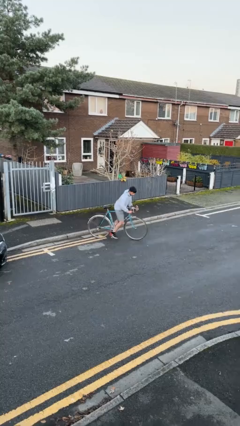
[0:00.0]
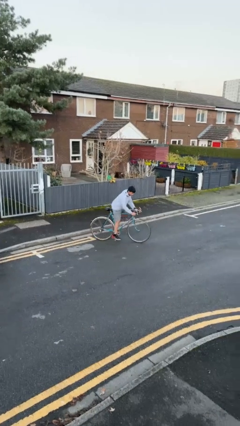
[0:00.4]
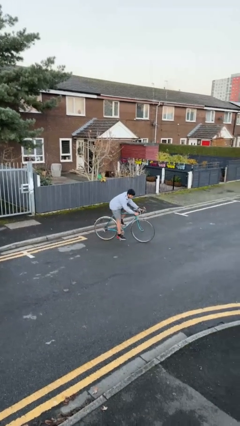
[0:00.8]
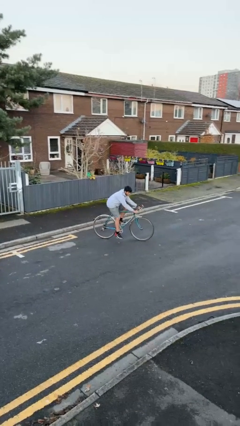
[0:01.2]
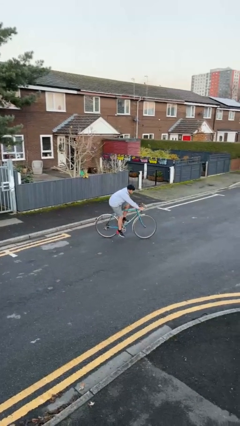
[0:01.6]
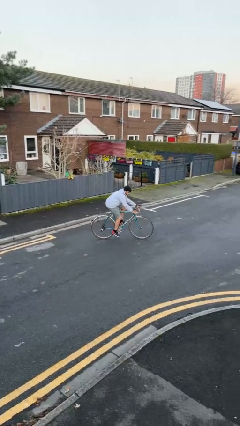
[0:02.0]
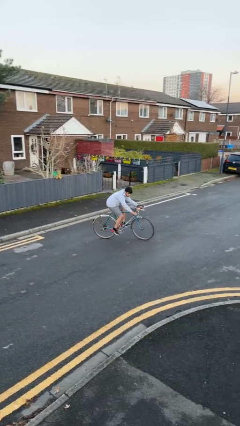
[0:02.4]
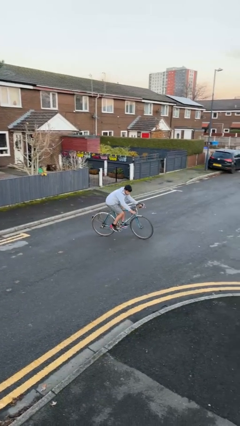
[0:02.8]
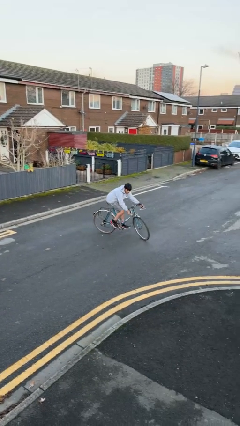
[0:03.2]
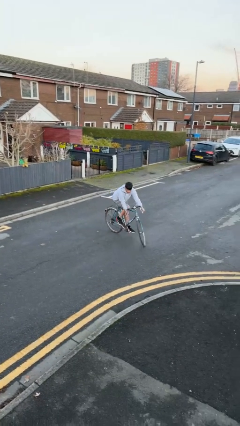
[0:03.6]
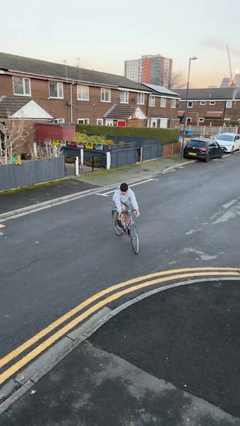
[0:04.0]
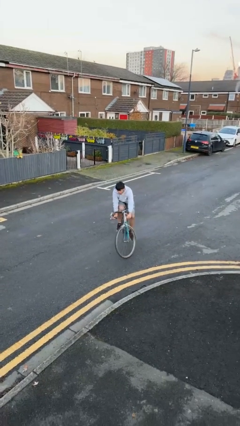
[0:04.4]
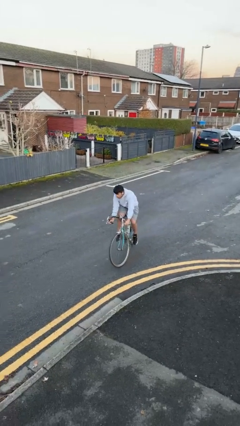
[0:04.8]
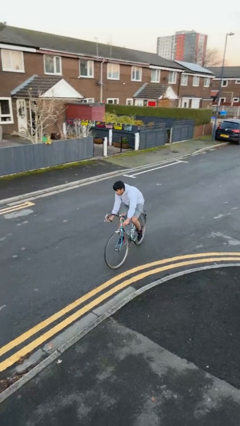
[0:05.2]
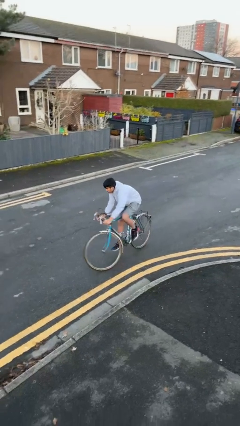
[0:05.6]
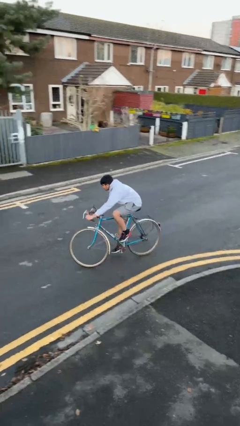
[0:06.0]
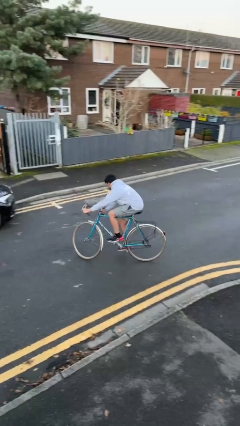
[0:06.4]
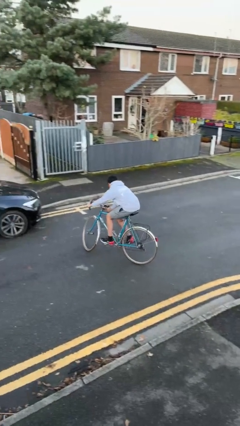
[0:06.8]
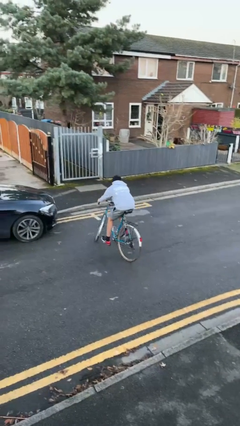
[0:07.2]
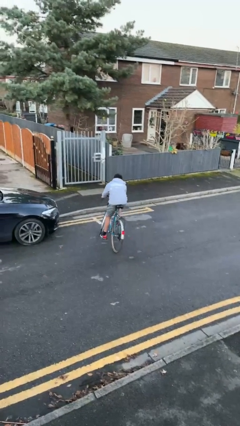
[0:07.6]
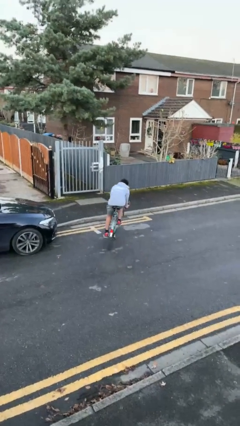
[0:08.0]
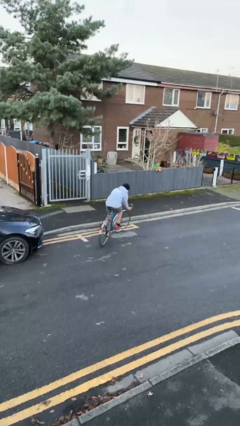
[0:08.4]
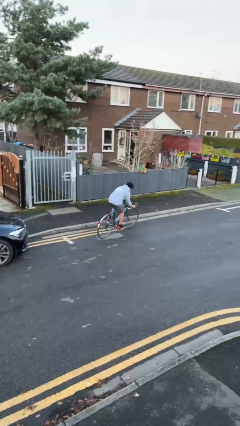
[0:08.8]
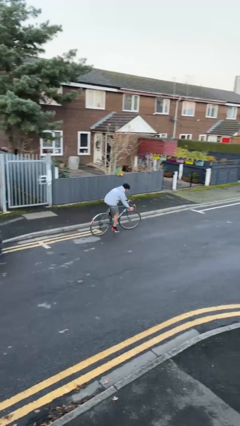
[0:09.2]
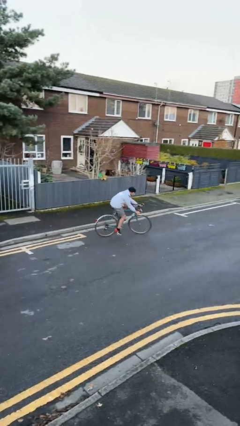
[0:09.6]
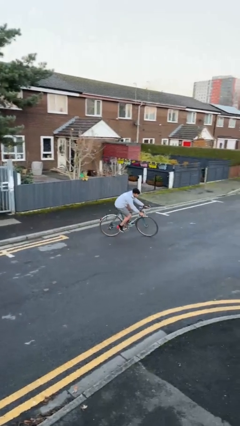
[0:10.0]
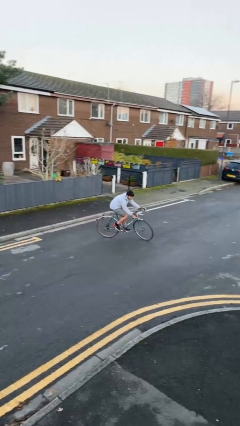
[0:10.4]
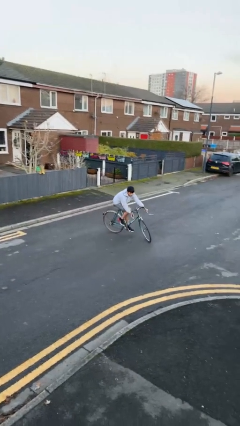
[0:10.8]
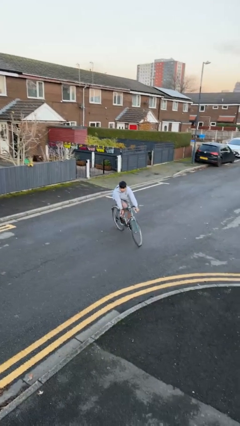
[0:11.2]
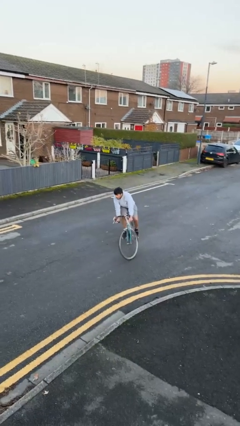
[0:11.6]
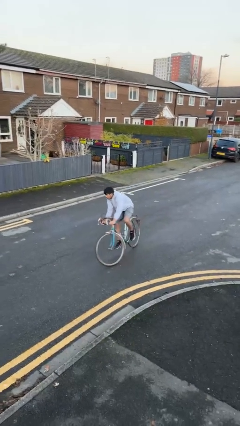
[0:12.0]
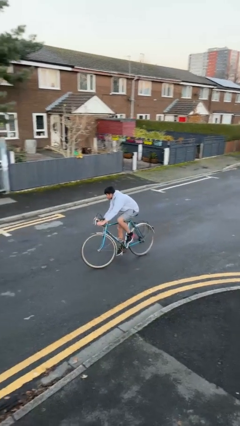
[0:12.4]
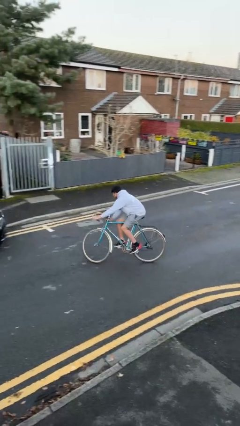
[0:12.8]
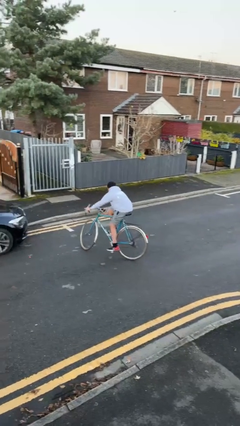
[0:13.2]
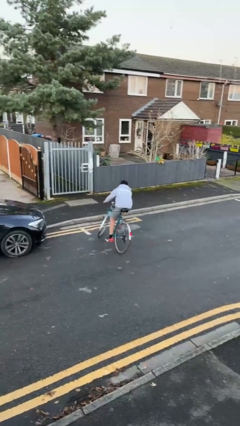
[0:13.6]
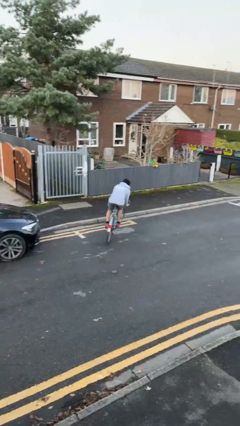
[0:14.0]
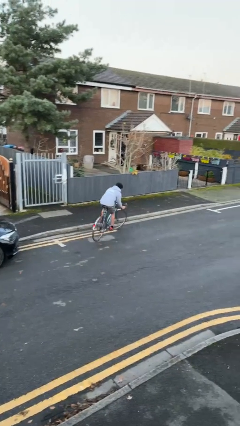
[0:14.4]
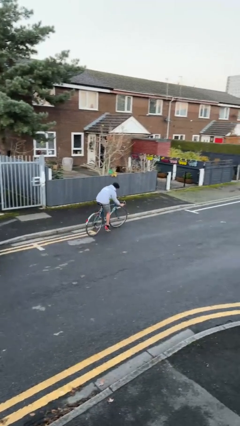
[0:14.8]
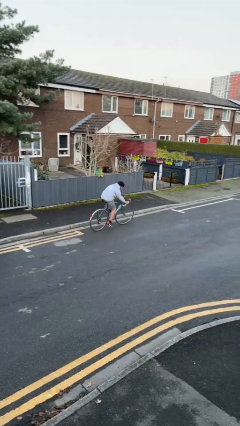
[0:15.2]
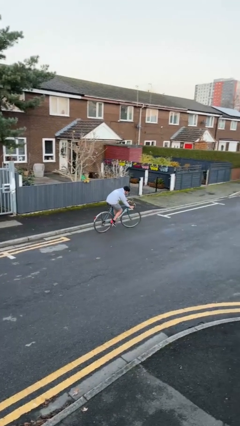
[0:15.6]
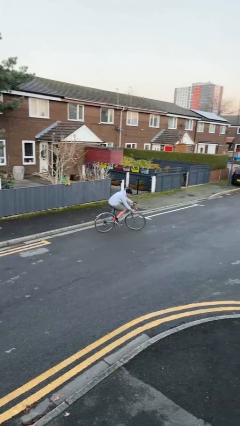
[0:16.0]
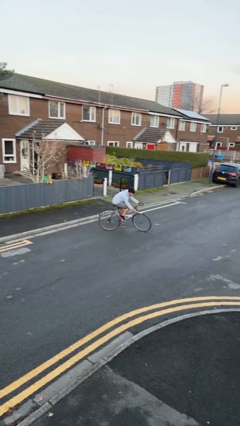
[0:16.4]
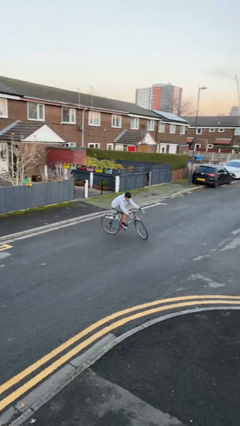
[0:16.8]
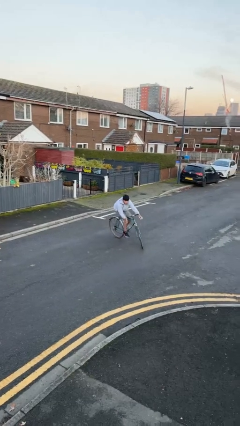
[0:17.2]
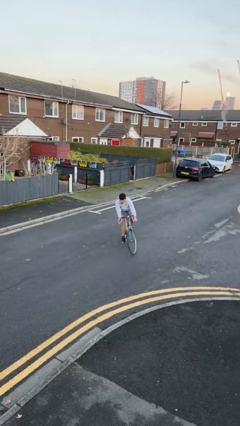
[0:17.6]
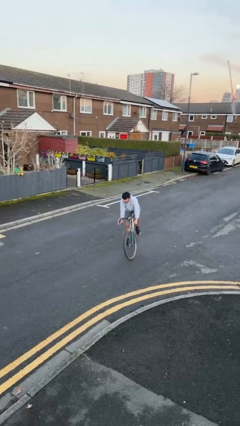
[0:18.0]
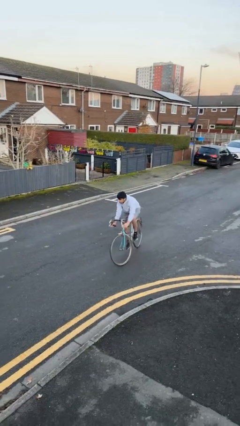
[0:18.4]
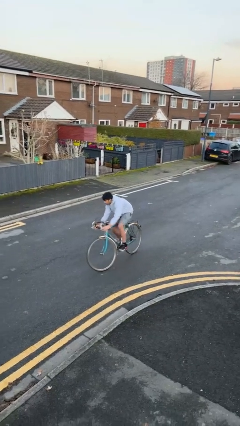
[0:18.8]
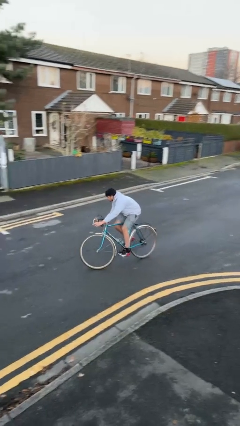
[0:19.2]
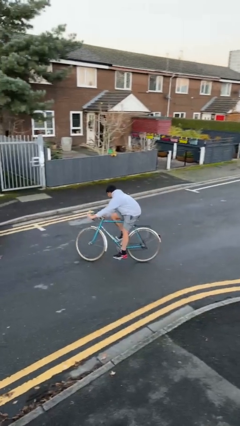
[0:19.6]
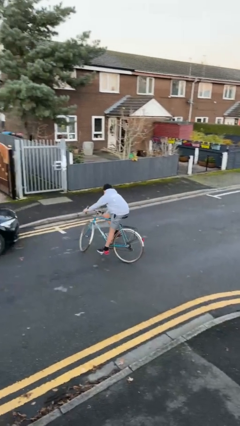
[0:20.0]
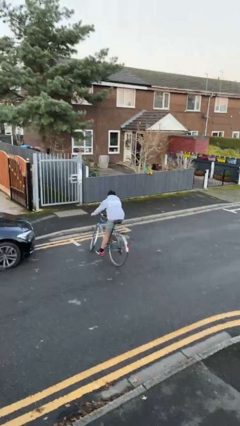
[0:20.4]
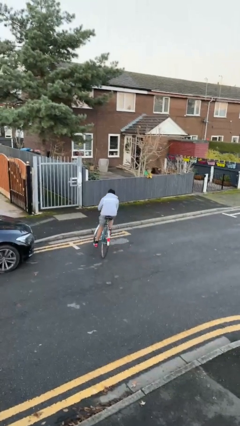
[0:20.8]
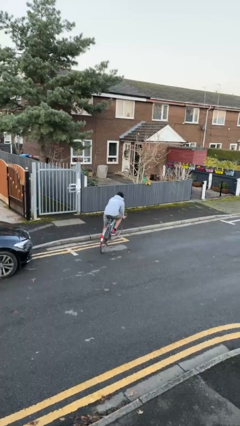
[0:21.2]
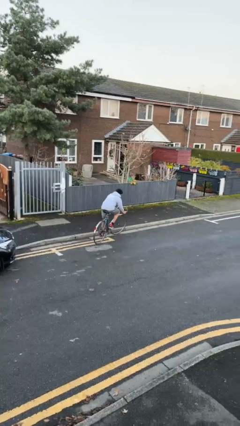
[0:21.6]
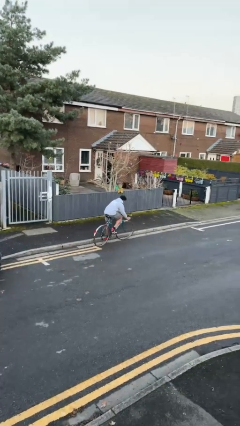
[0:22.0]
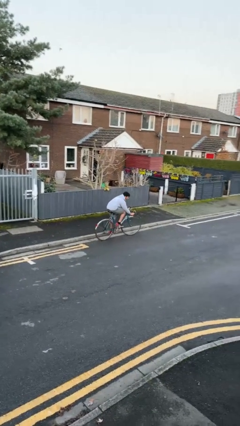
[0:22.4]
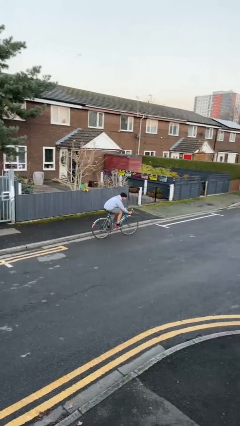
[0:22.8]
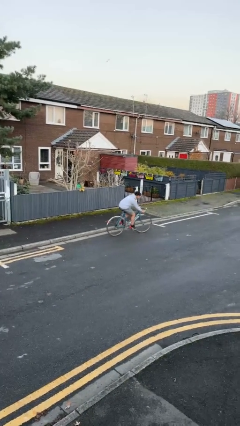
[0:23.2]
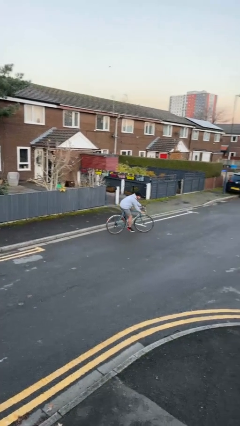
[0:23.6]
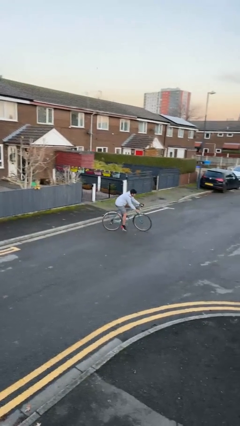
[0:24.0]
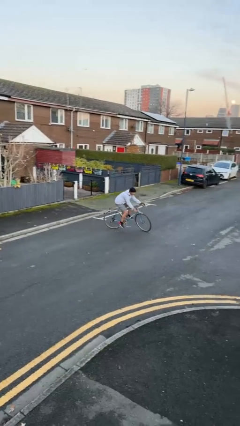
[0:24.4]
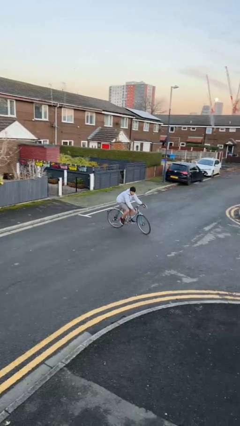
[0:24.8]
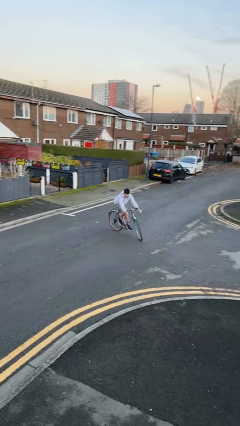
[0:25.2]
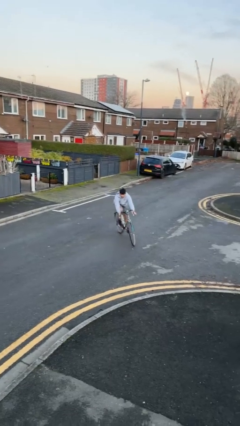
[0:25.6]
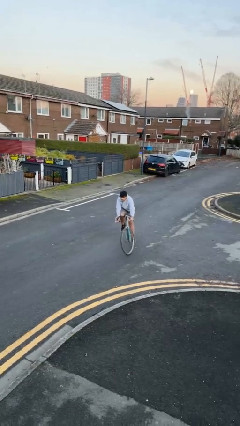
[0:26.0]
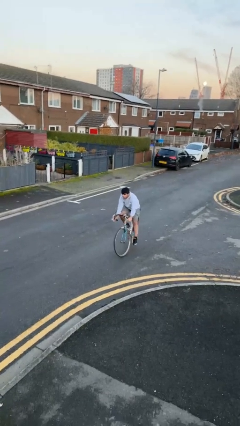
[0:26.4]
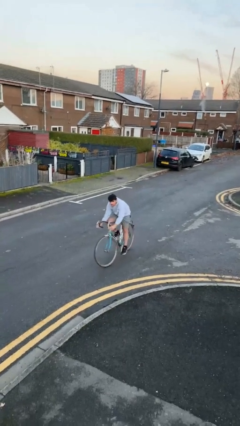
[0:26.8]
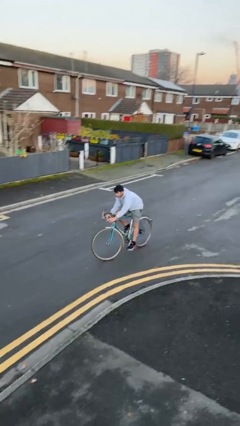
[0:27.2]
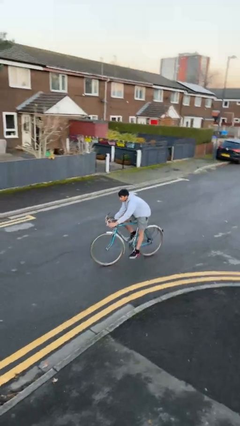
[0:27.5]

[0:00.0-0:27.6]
person rides bicycle

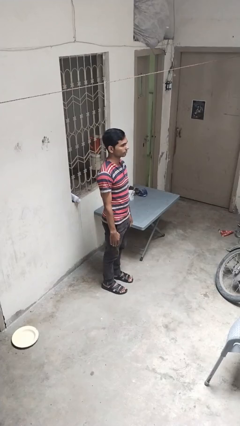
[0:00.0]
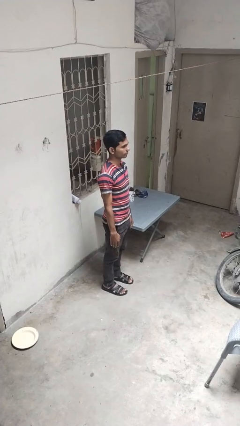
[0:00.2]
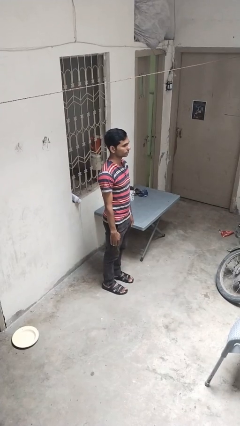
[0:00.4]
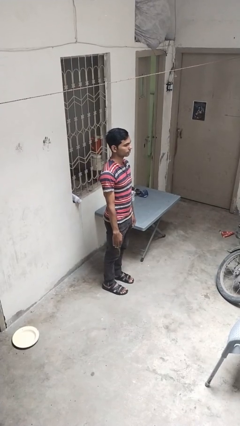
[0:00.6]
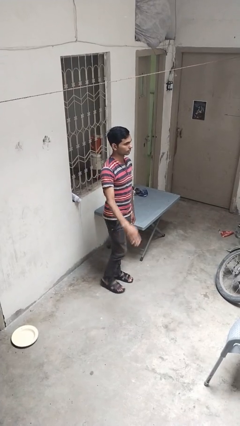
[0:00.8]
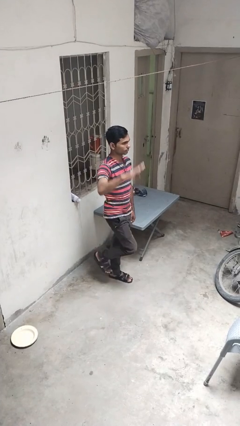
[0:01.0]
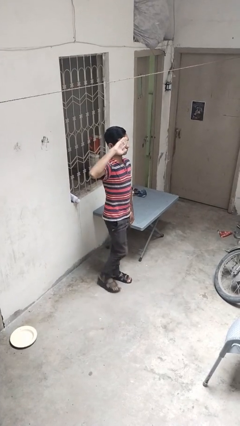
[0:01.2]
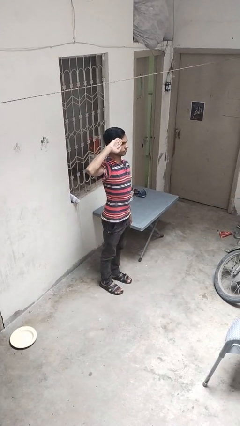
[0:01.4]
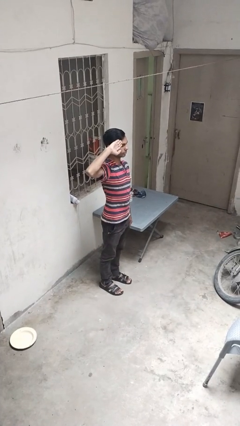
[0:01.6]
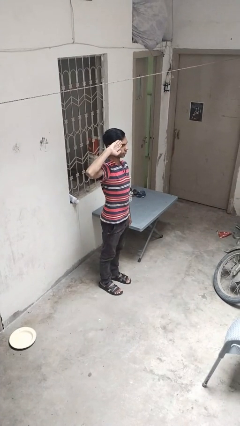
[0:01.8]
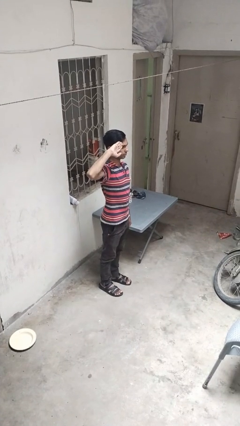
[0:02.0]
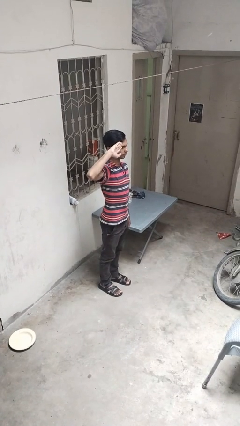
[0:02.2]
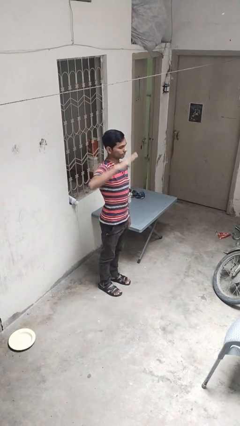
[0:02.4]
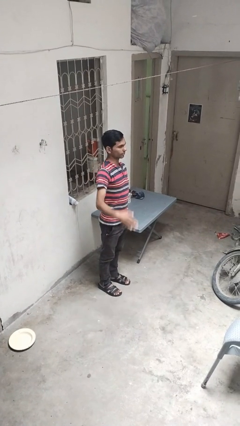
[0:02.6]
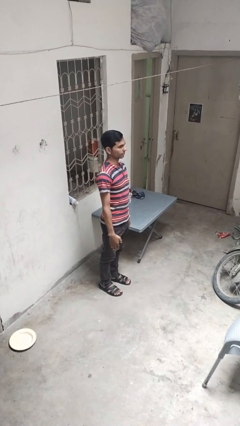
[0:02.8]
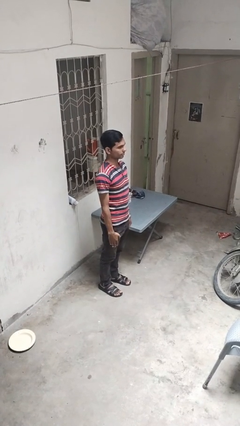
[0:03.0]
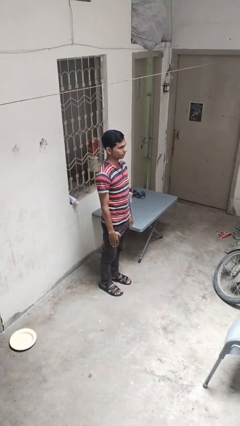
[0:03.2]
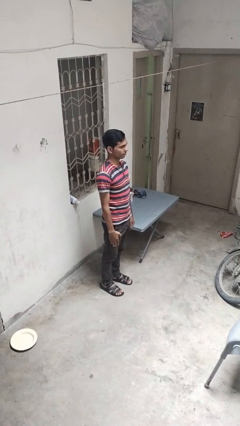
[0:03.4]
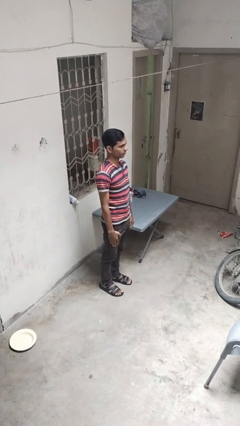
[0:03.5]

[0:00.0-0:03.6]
person salutes

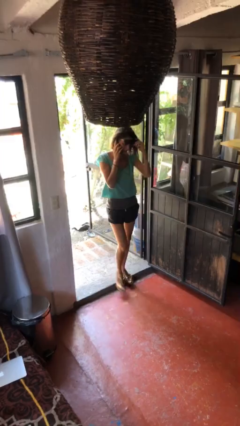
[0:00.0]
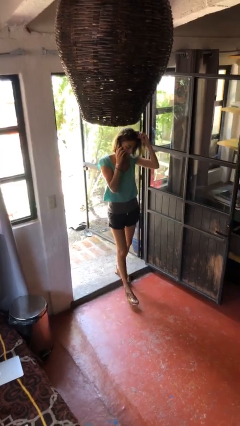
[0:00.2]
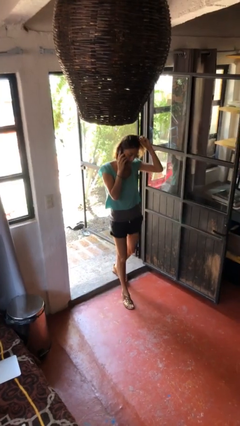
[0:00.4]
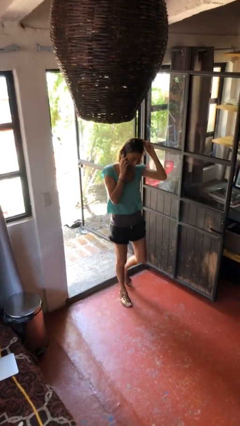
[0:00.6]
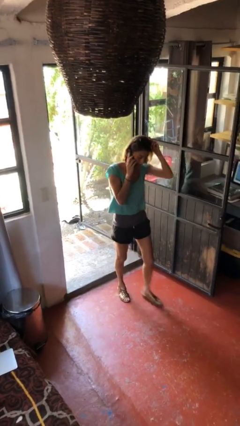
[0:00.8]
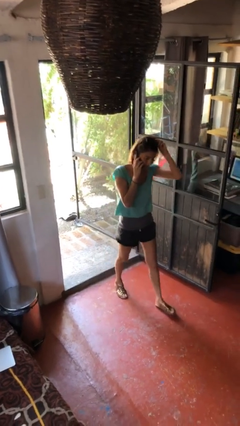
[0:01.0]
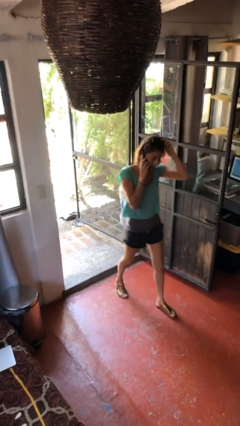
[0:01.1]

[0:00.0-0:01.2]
person enters scene through structure
